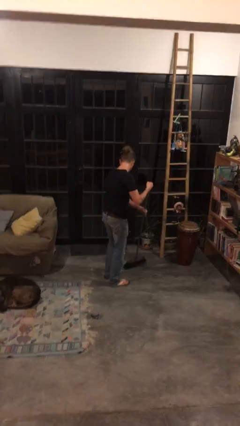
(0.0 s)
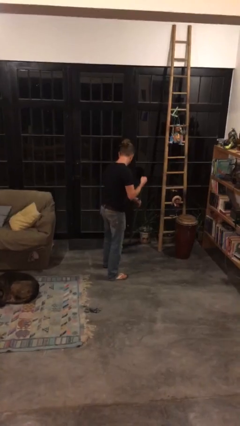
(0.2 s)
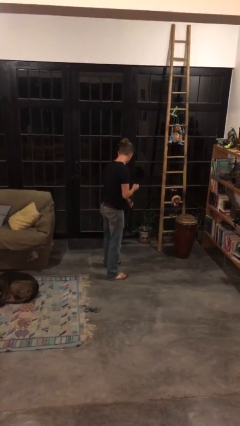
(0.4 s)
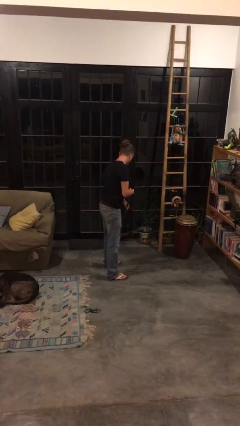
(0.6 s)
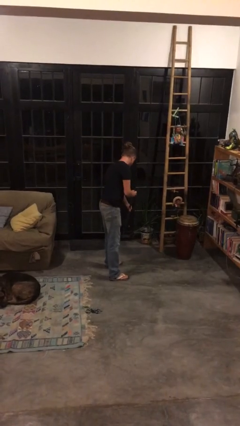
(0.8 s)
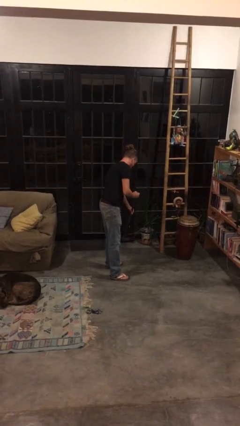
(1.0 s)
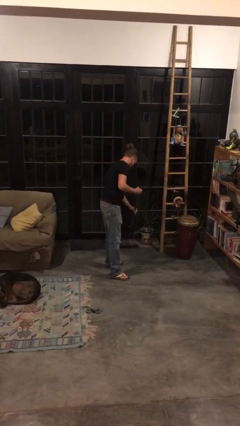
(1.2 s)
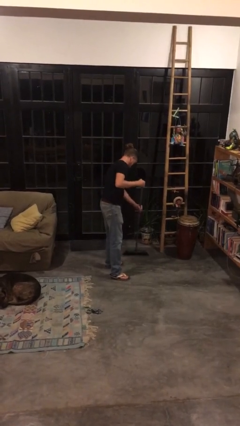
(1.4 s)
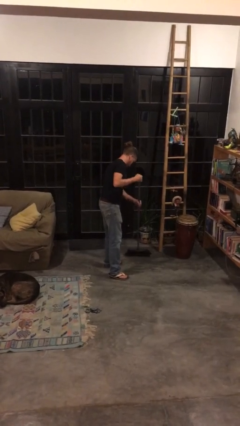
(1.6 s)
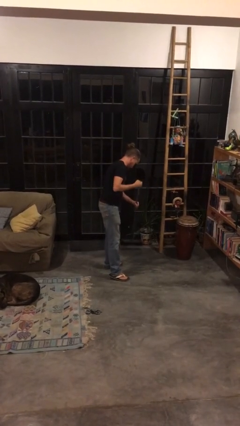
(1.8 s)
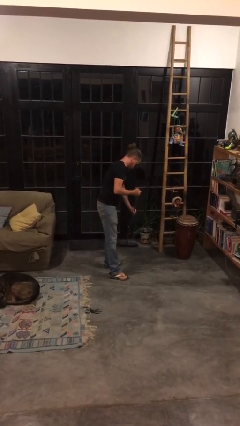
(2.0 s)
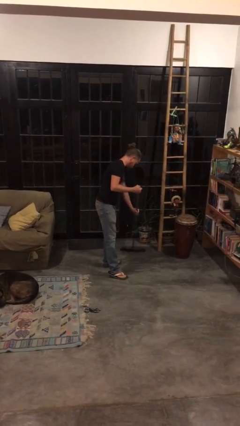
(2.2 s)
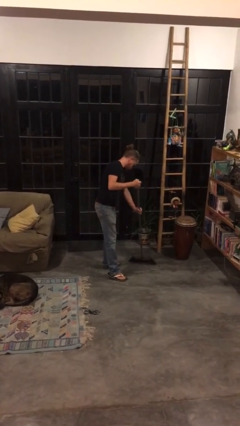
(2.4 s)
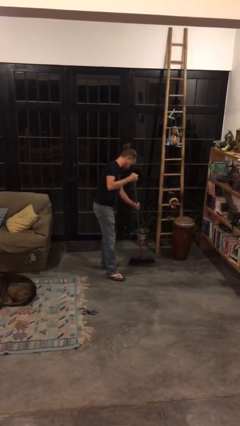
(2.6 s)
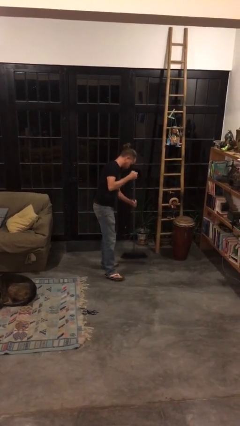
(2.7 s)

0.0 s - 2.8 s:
person sweeps floor

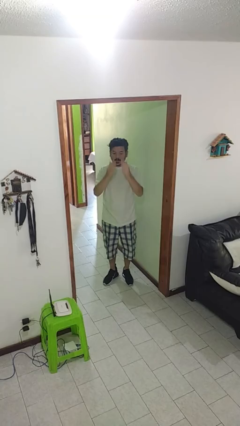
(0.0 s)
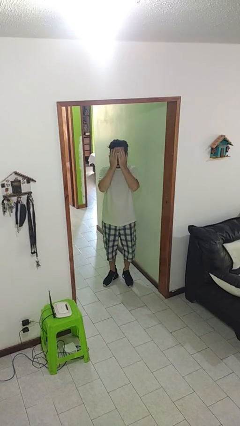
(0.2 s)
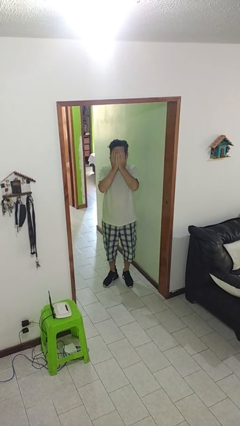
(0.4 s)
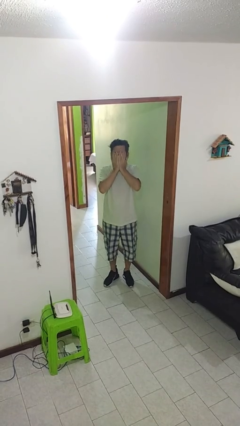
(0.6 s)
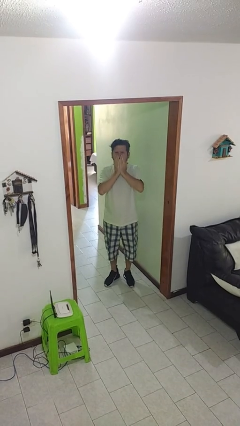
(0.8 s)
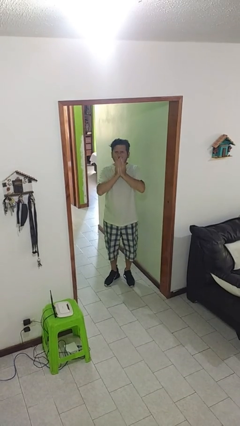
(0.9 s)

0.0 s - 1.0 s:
person covers face with hands

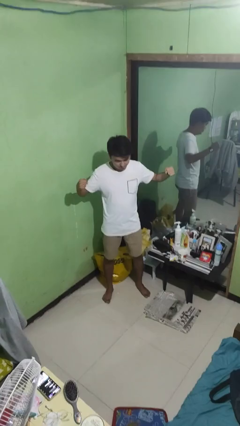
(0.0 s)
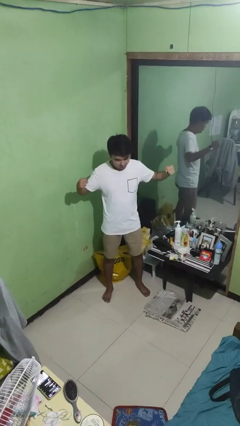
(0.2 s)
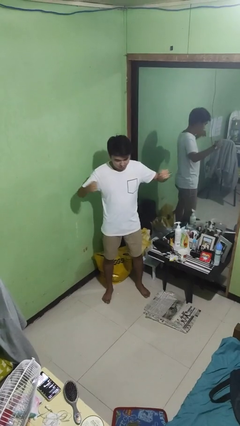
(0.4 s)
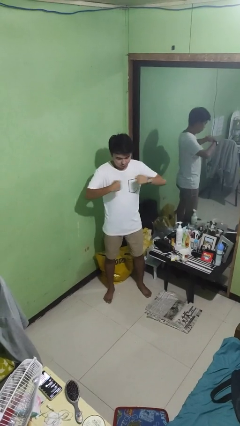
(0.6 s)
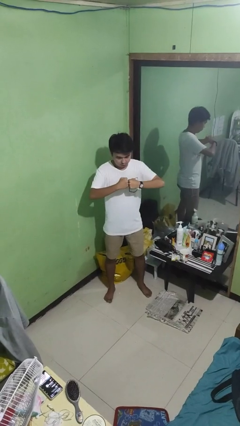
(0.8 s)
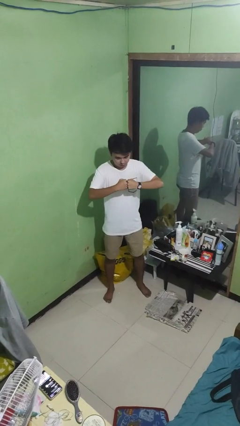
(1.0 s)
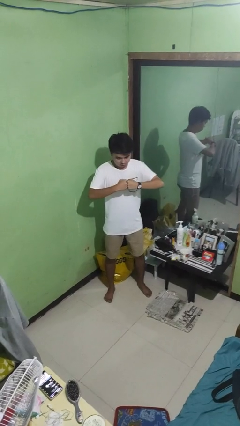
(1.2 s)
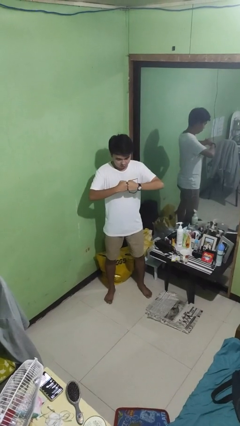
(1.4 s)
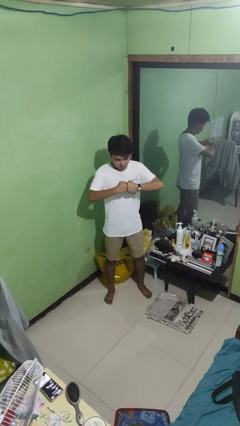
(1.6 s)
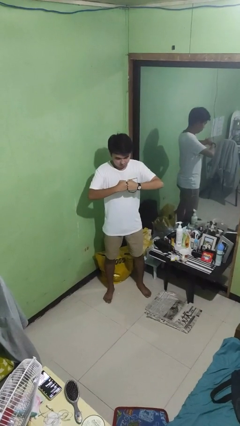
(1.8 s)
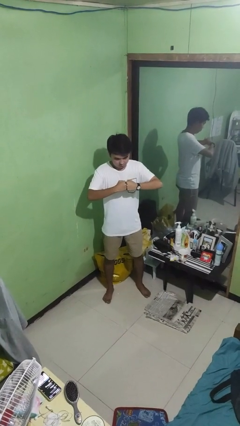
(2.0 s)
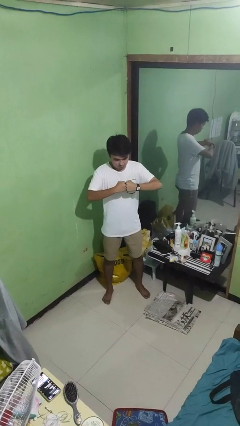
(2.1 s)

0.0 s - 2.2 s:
person gestures zoom out

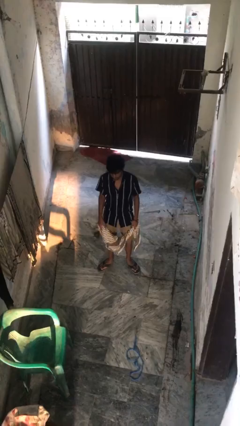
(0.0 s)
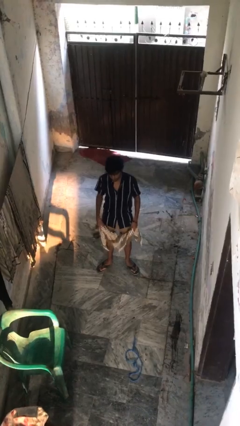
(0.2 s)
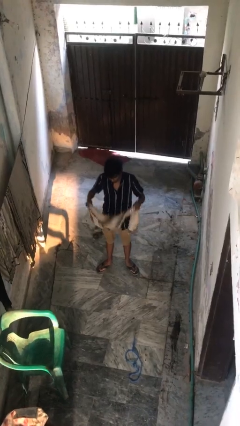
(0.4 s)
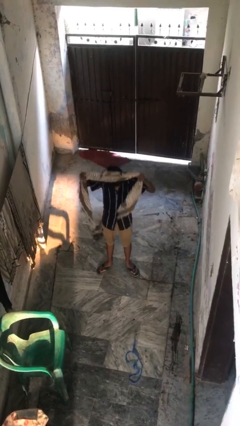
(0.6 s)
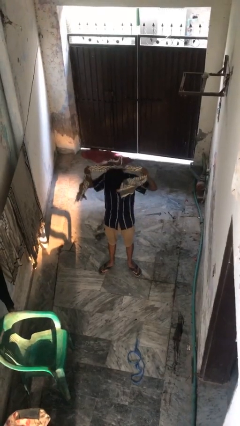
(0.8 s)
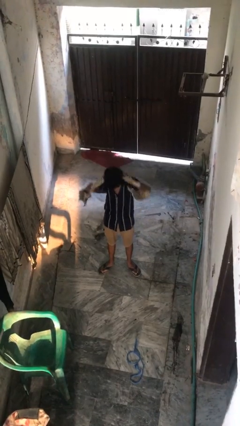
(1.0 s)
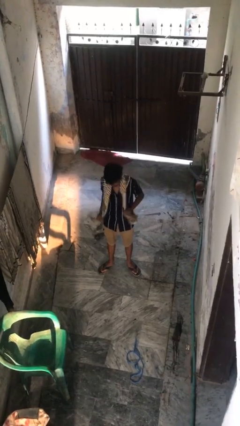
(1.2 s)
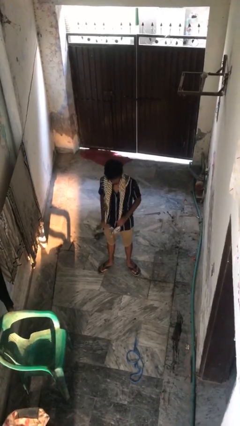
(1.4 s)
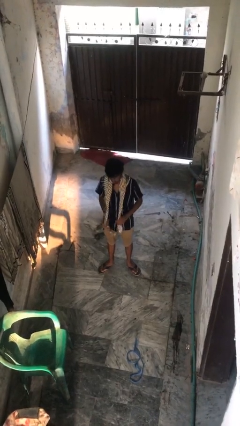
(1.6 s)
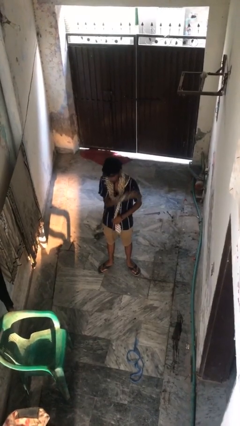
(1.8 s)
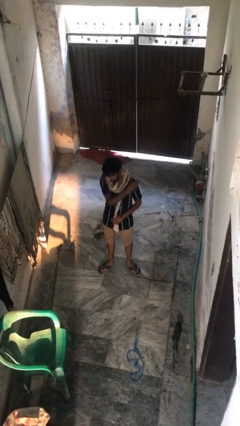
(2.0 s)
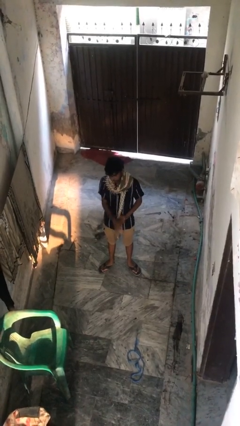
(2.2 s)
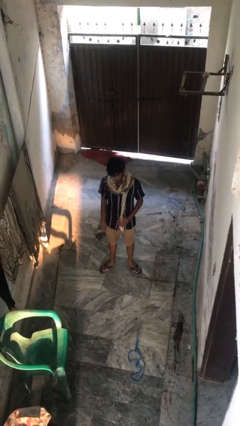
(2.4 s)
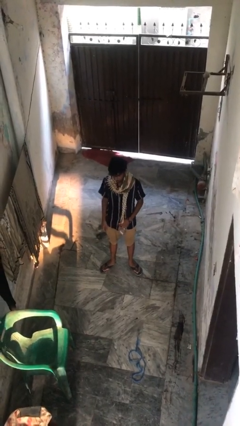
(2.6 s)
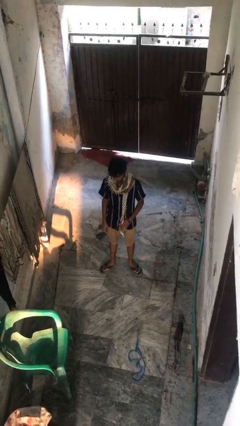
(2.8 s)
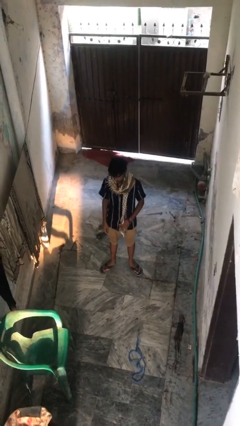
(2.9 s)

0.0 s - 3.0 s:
person puts on scarf

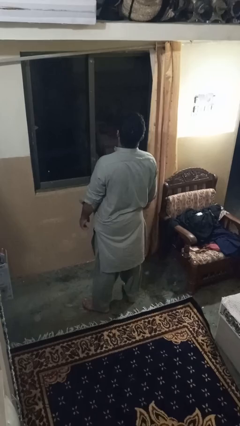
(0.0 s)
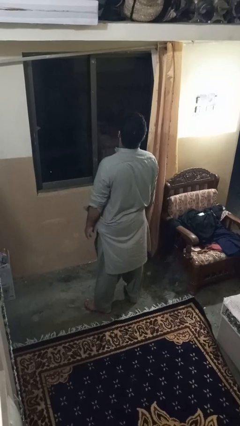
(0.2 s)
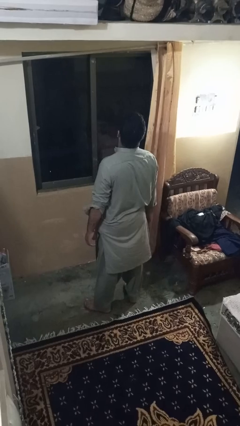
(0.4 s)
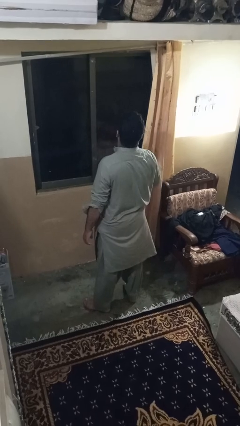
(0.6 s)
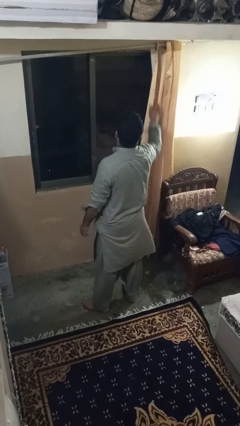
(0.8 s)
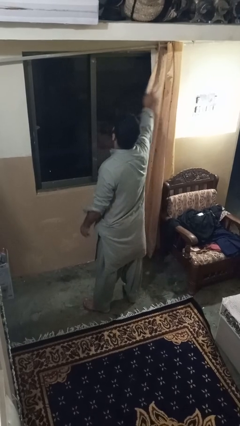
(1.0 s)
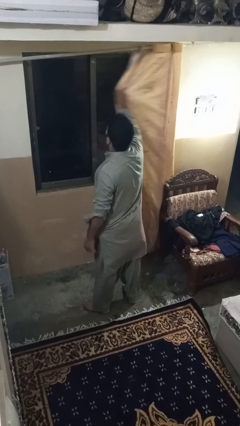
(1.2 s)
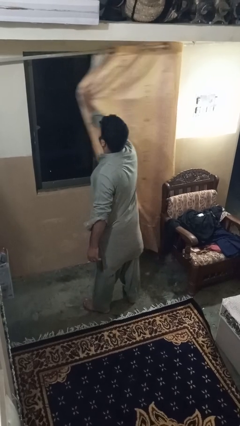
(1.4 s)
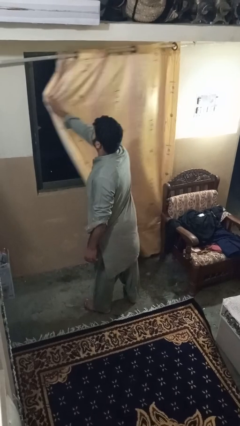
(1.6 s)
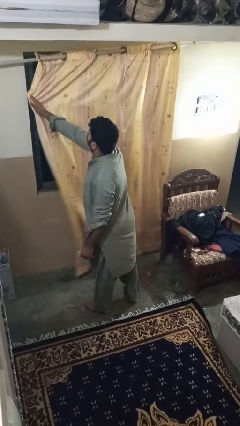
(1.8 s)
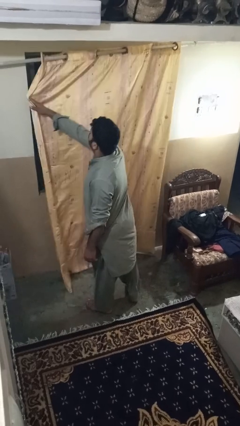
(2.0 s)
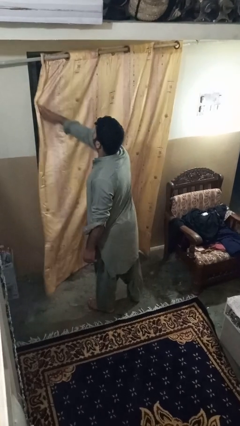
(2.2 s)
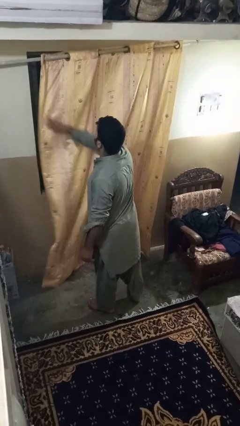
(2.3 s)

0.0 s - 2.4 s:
person closes curtains

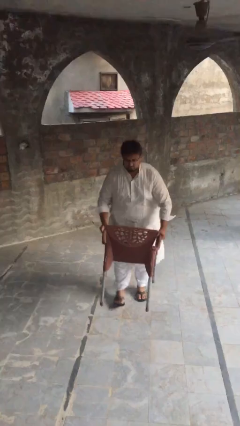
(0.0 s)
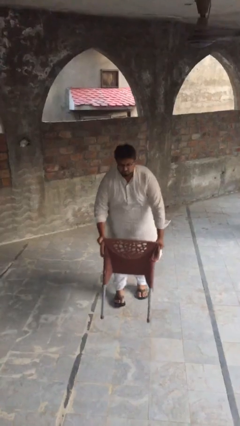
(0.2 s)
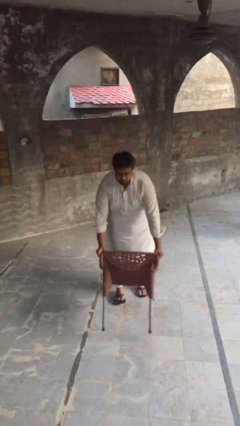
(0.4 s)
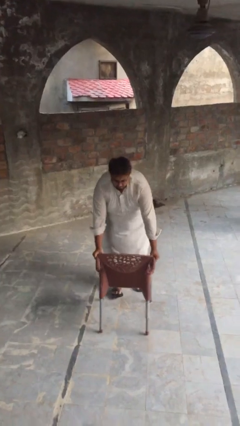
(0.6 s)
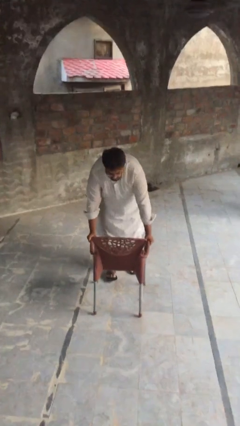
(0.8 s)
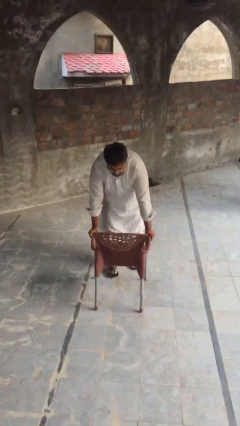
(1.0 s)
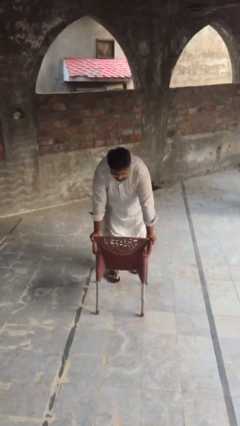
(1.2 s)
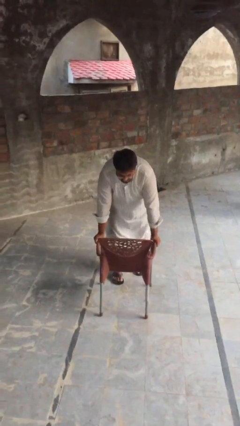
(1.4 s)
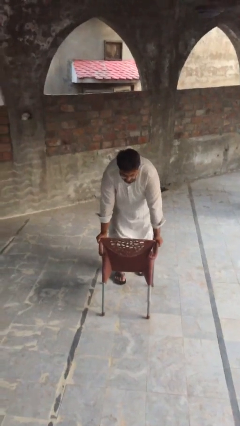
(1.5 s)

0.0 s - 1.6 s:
person puts down object on floor

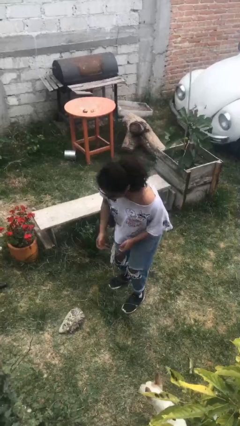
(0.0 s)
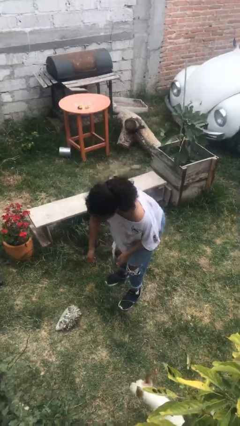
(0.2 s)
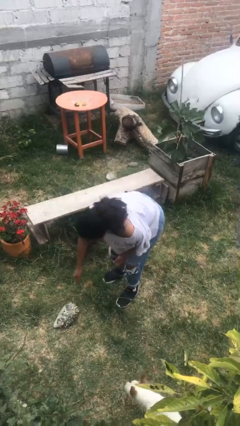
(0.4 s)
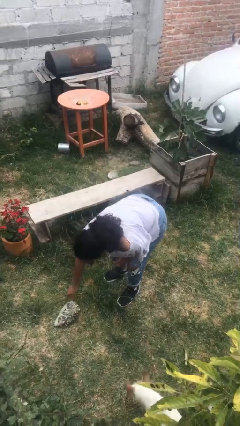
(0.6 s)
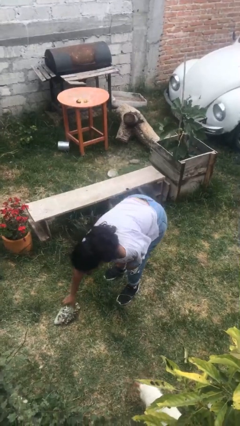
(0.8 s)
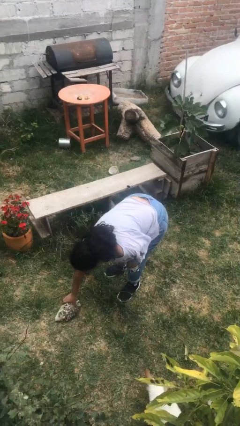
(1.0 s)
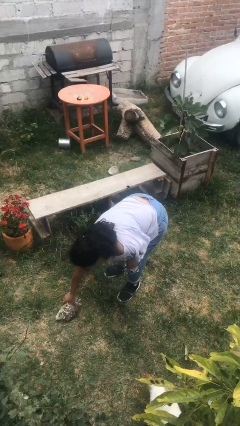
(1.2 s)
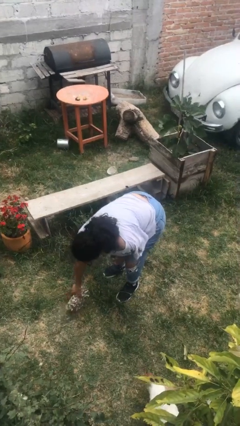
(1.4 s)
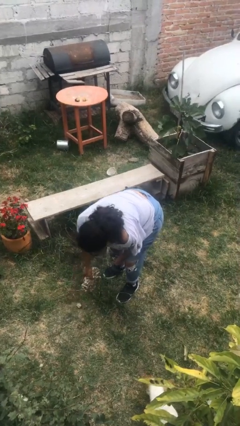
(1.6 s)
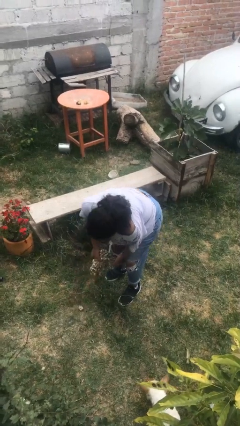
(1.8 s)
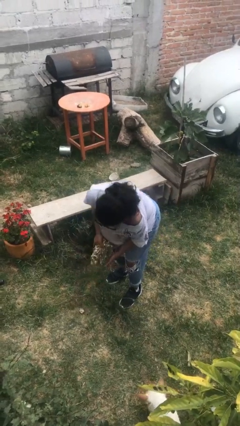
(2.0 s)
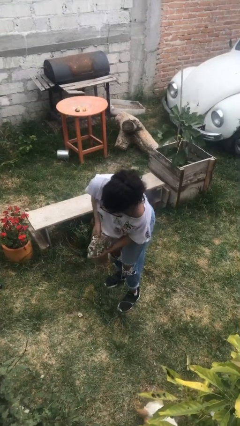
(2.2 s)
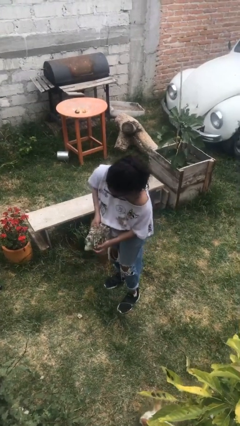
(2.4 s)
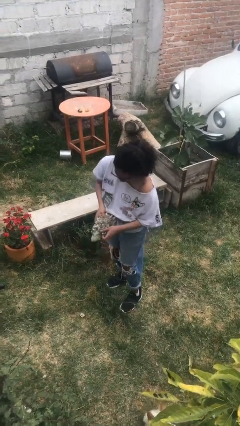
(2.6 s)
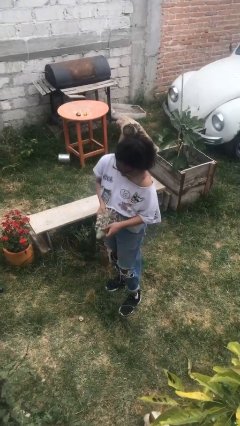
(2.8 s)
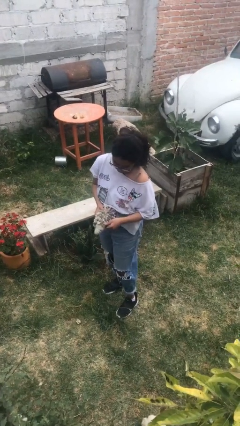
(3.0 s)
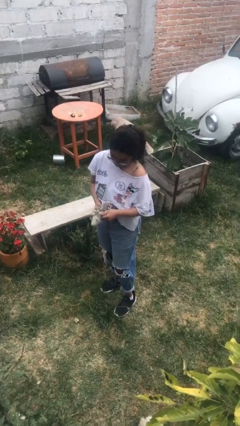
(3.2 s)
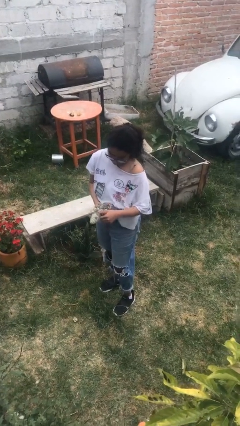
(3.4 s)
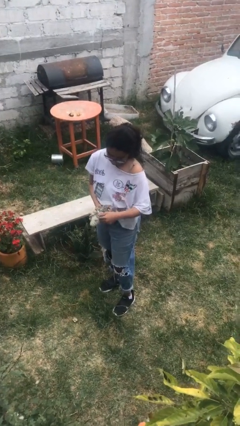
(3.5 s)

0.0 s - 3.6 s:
person picks up object from floor

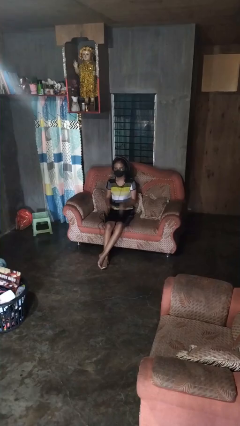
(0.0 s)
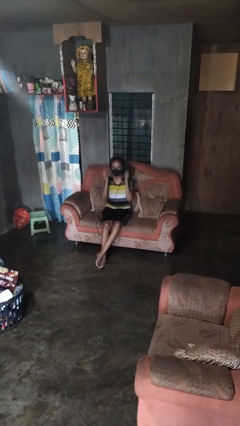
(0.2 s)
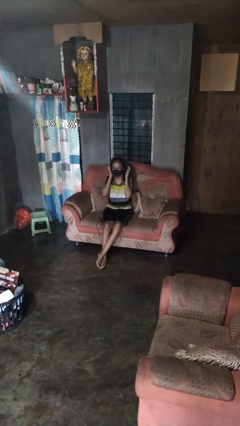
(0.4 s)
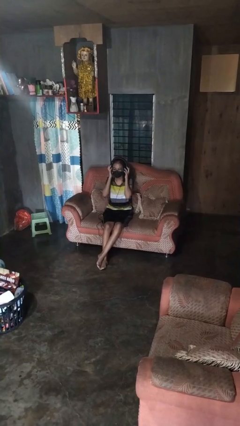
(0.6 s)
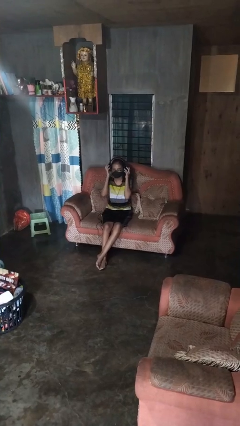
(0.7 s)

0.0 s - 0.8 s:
person takes off headphones
